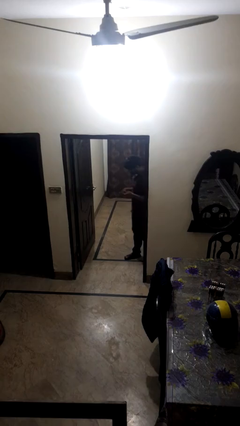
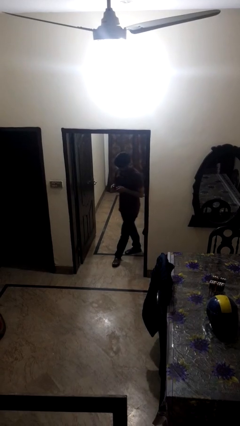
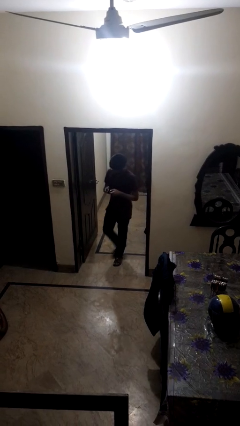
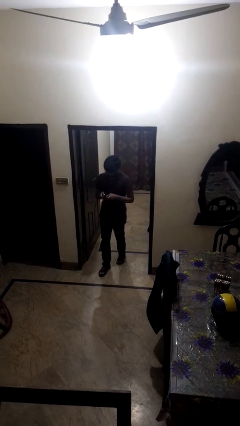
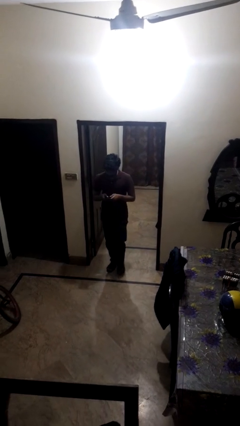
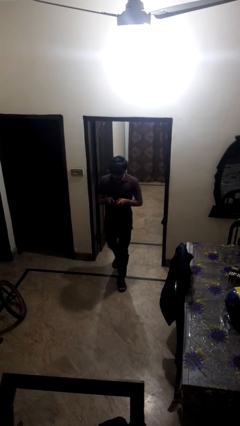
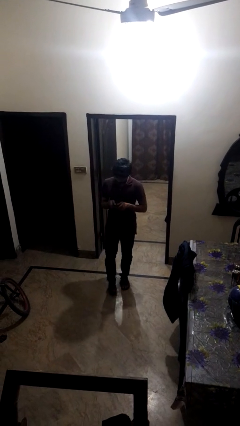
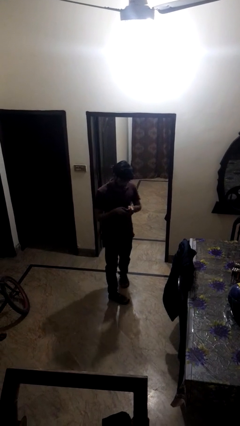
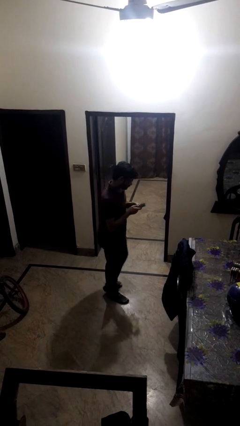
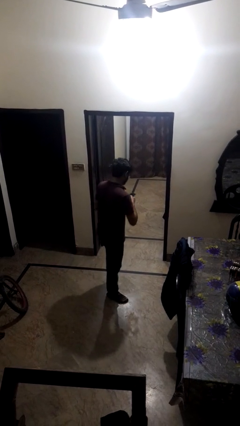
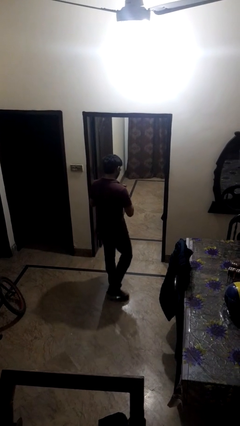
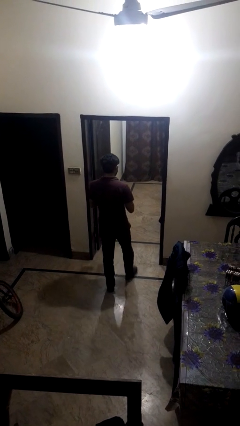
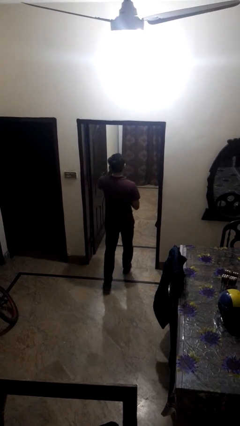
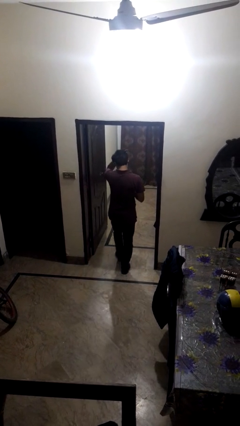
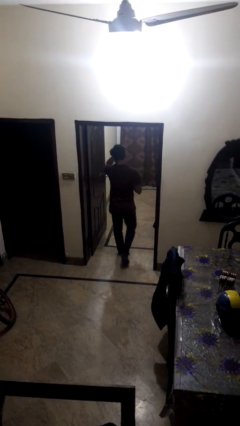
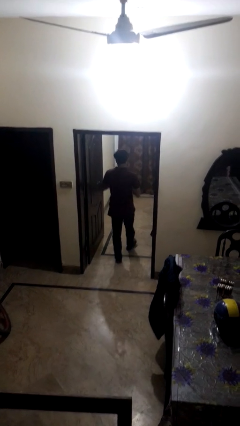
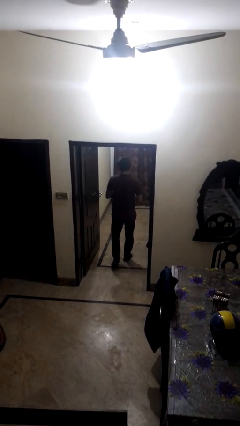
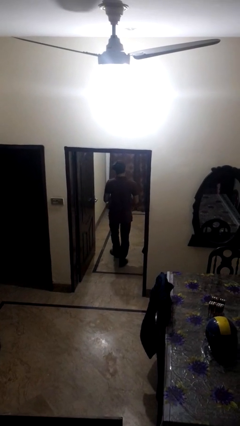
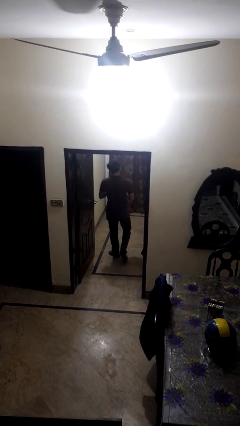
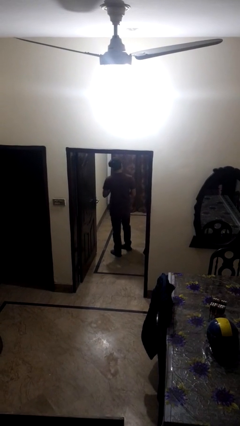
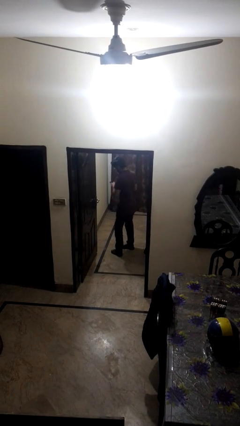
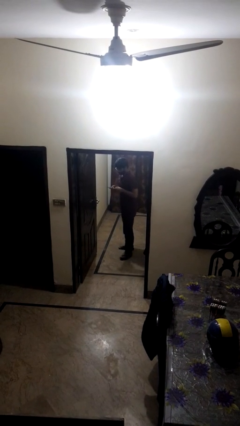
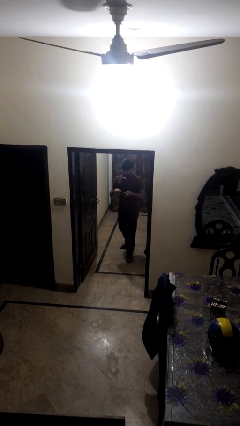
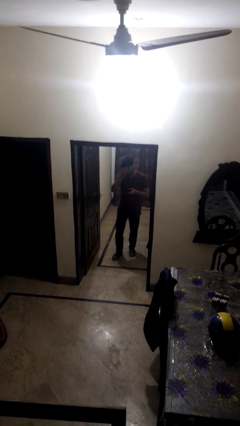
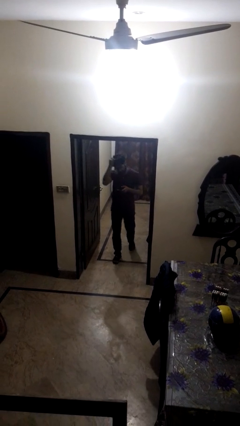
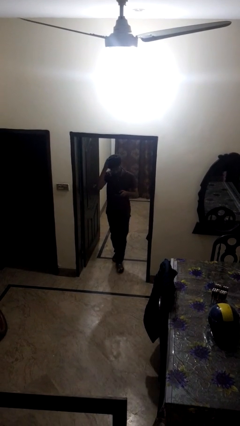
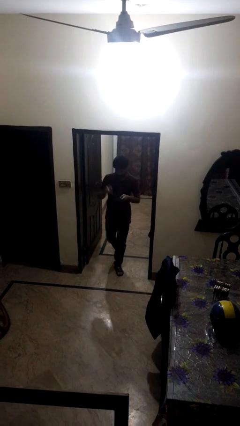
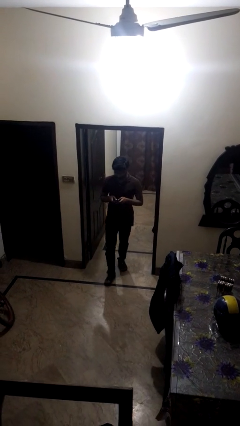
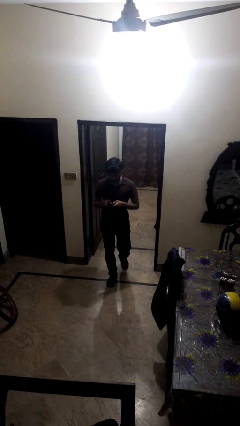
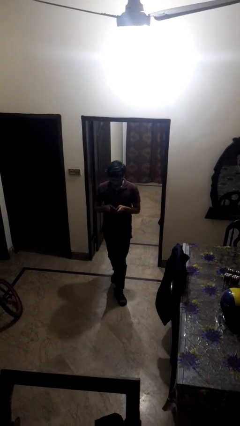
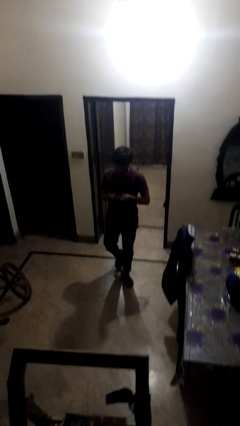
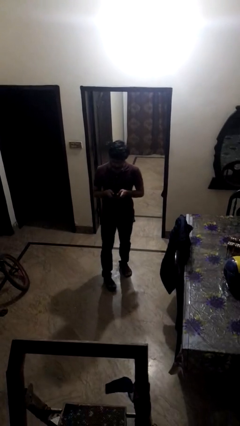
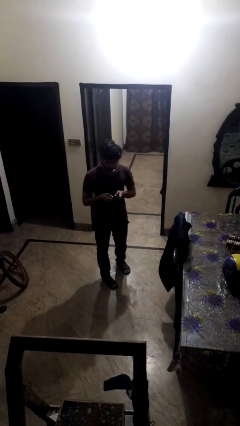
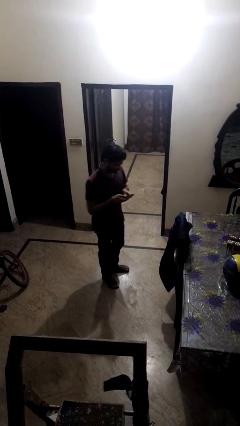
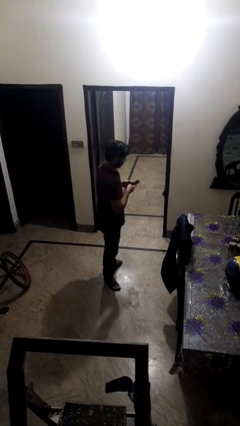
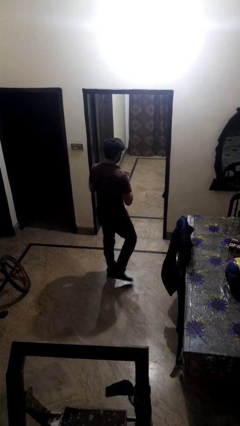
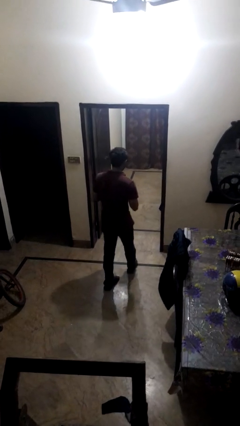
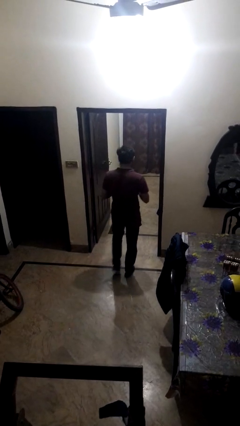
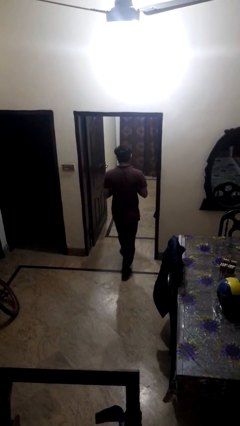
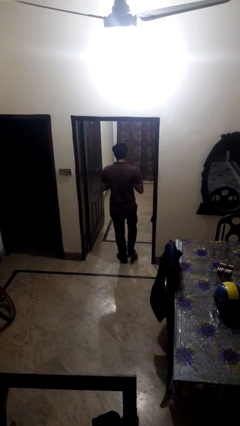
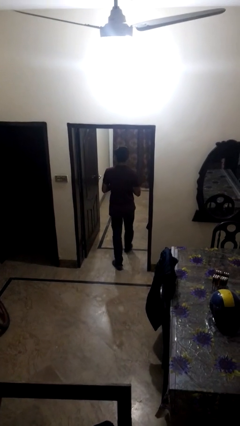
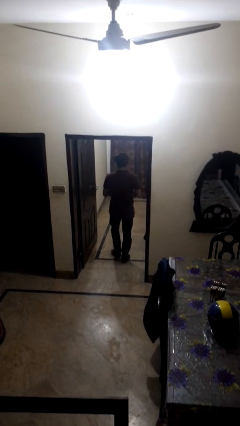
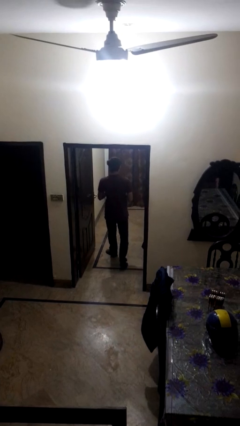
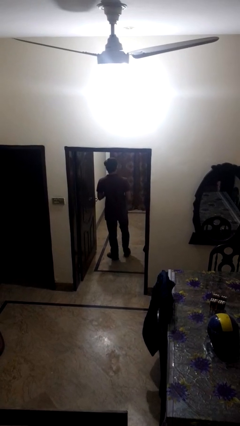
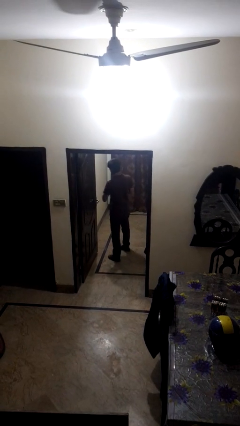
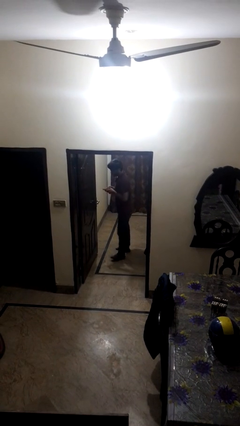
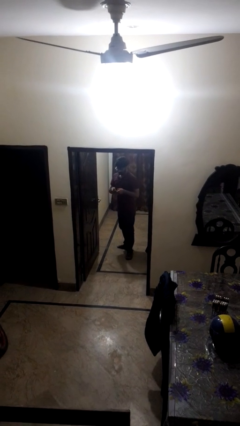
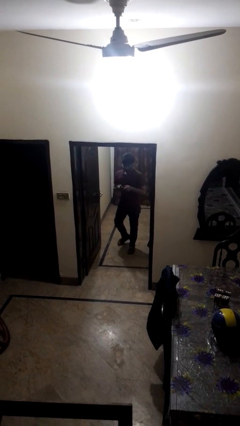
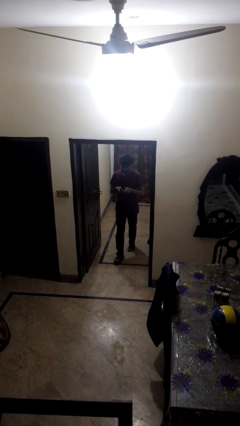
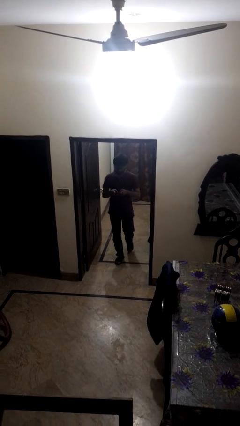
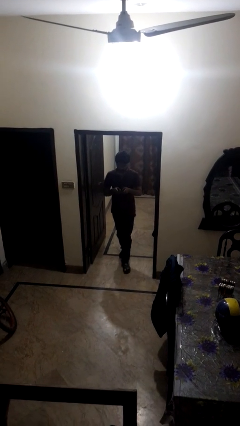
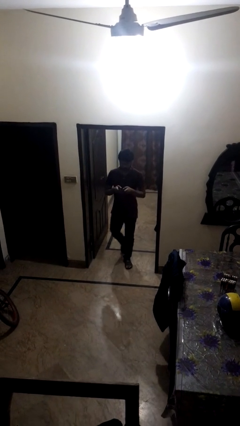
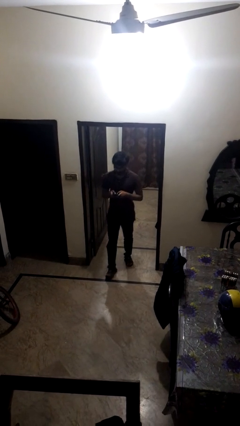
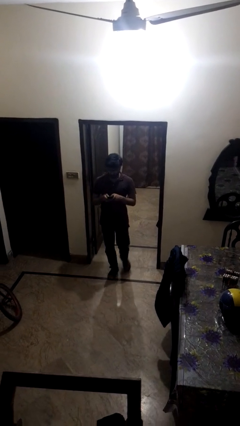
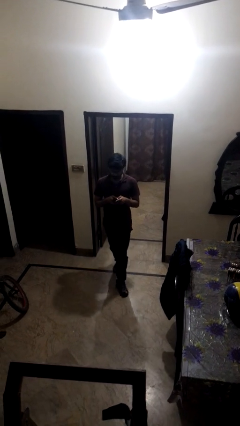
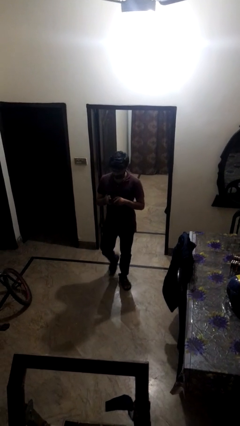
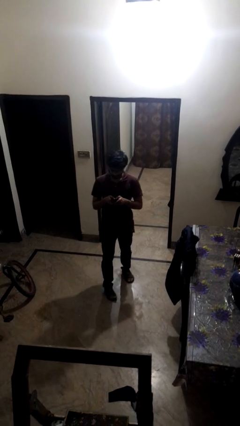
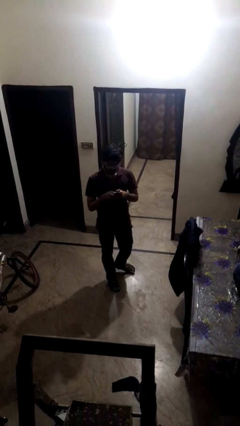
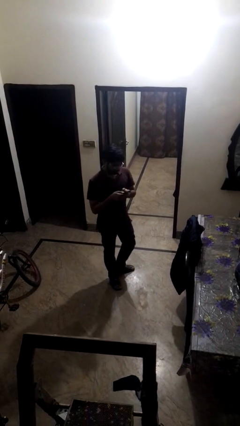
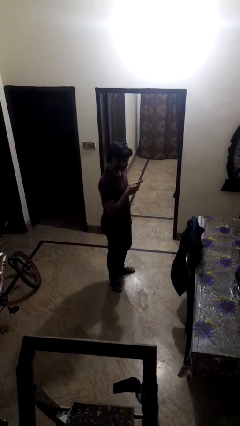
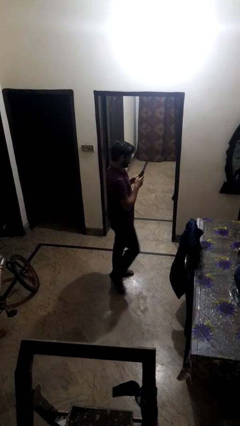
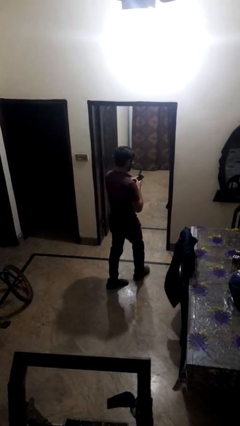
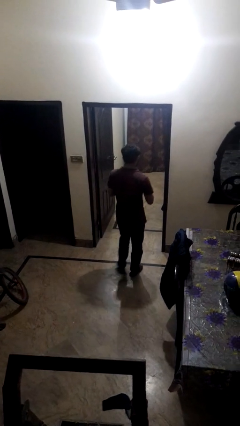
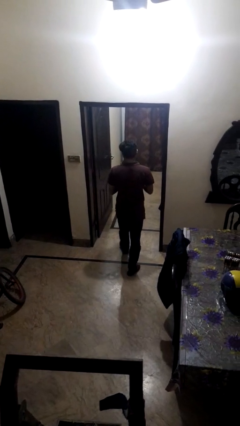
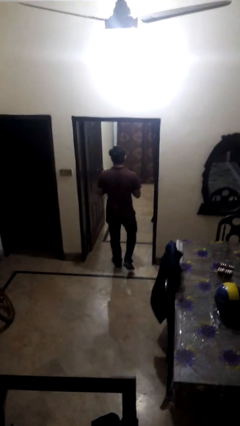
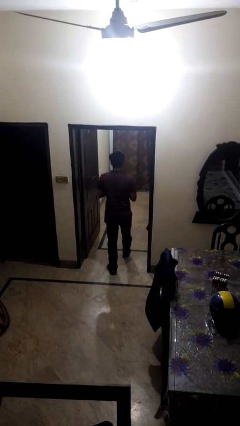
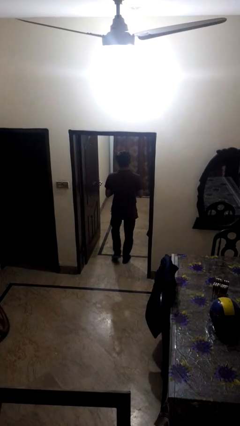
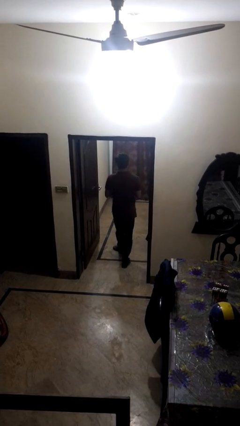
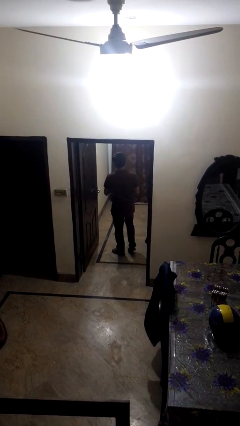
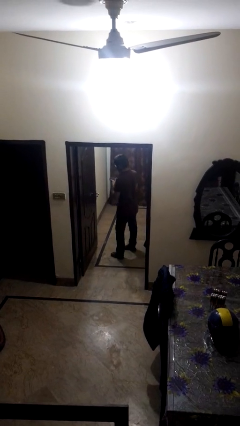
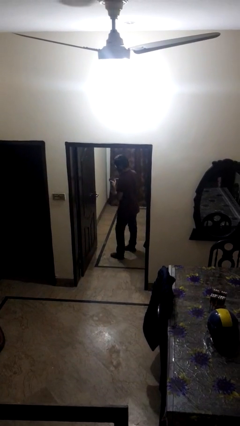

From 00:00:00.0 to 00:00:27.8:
person texts on phone

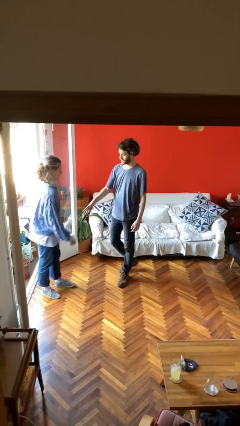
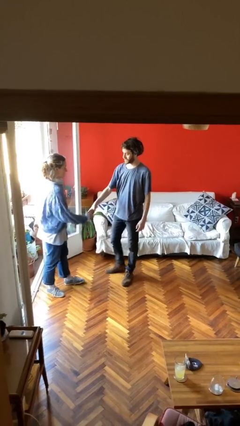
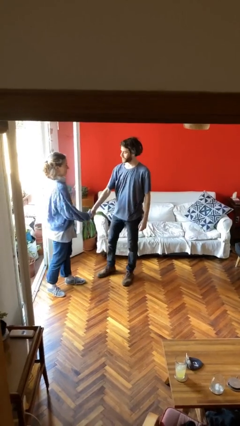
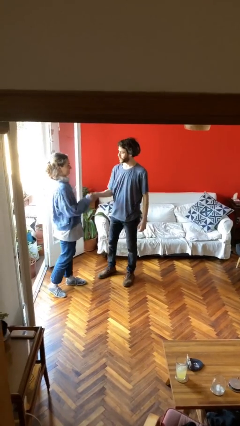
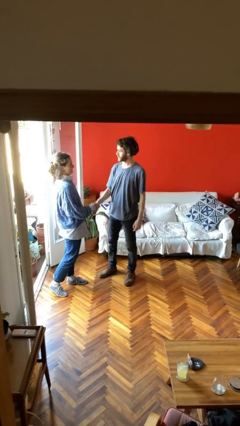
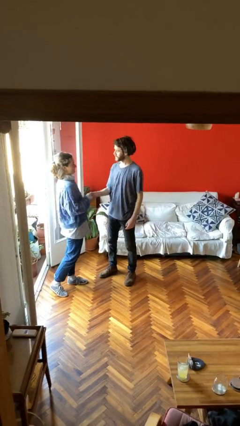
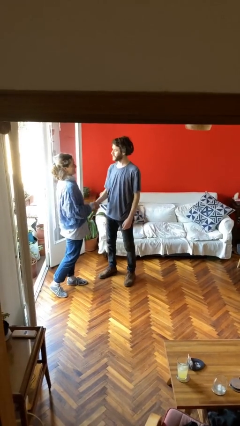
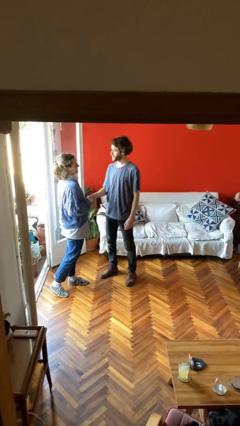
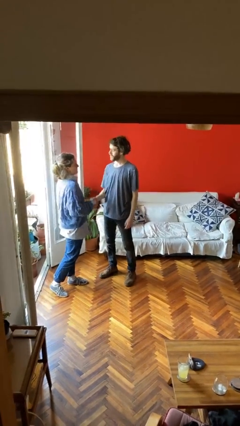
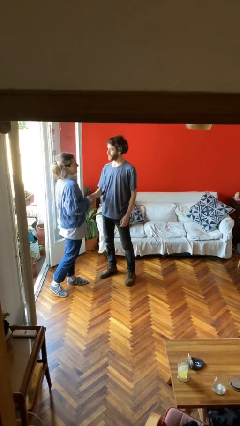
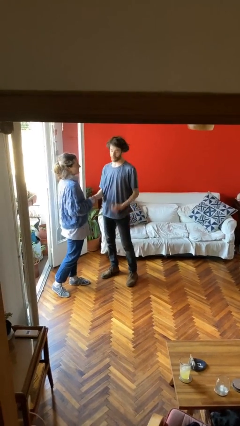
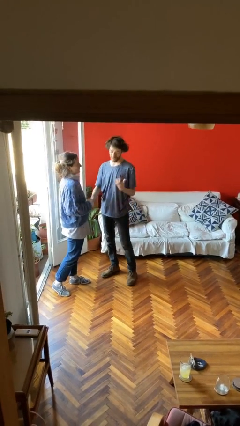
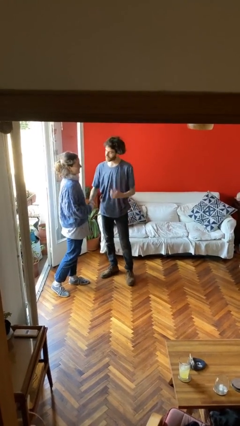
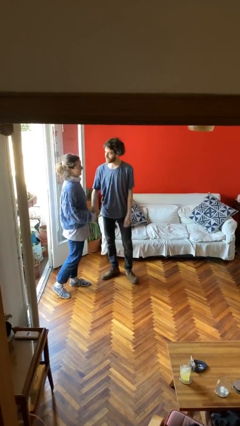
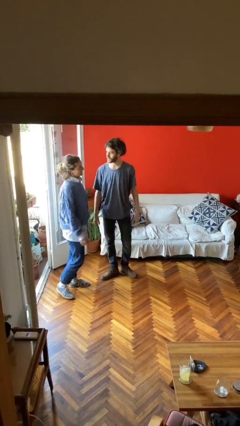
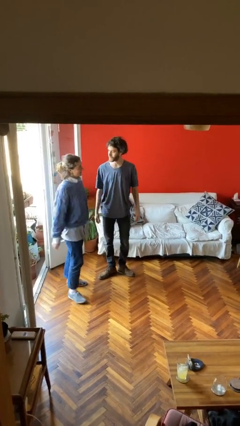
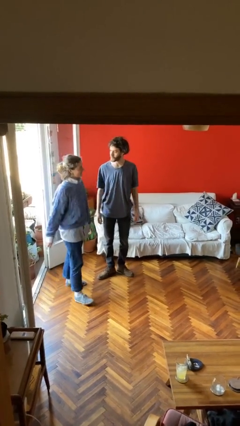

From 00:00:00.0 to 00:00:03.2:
person shakes hand

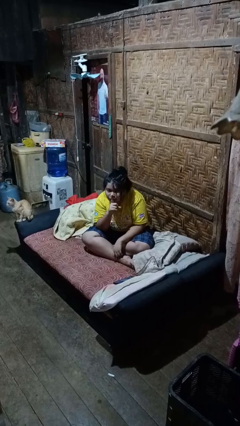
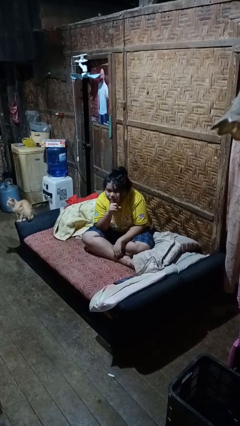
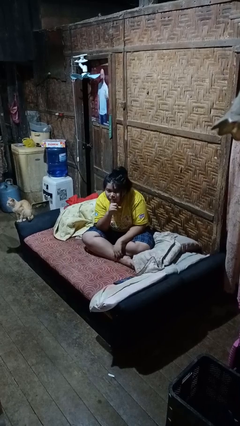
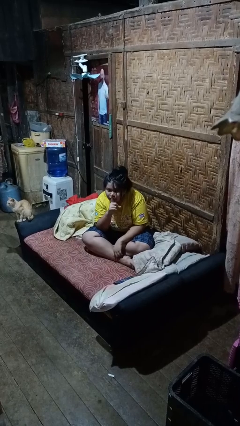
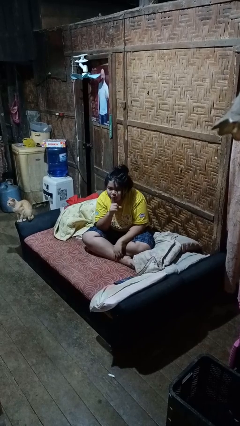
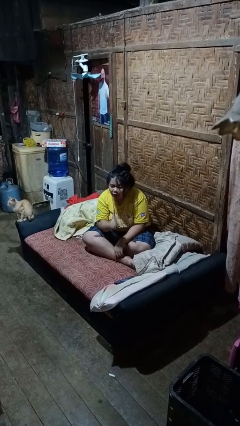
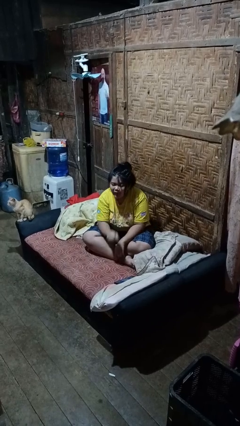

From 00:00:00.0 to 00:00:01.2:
person gestures be quiet
